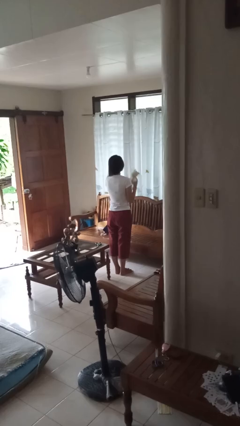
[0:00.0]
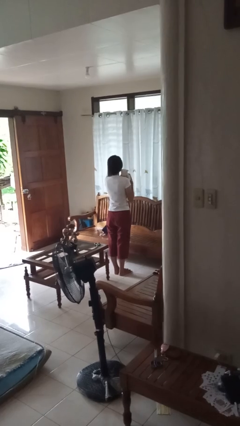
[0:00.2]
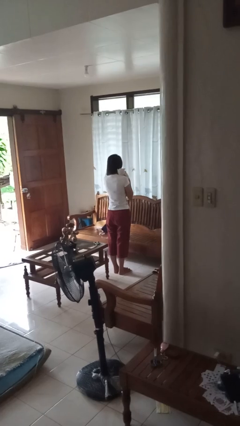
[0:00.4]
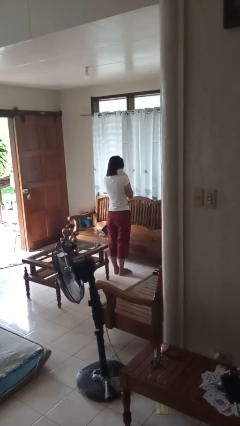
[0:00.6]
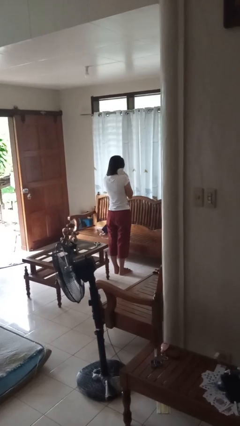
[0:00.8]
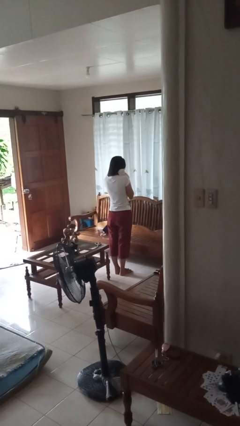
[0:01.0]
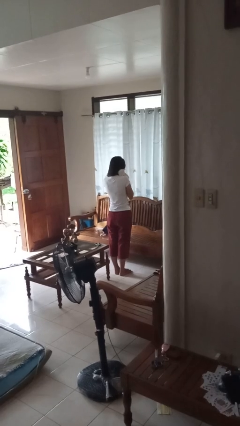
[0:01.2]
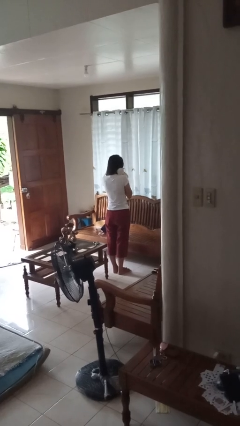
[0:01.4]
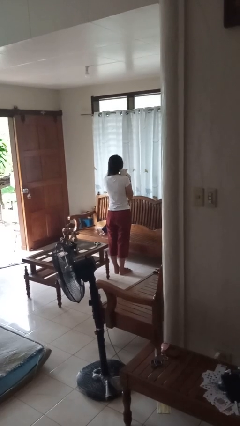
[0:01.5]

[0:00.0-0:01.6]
person hugs stuffed animal

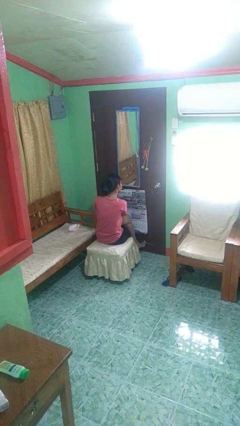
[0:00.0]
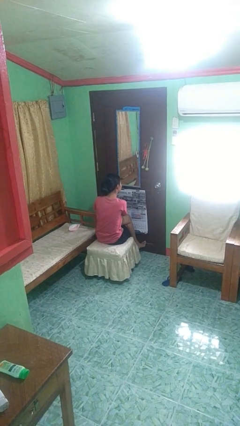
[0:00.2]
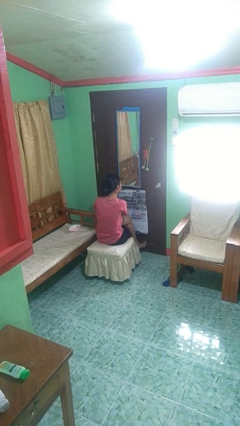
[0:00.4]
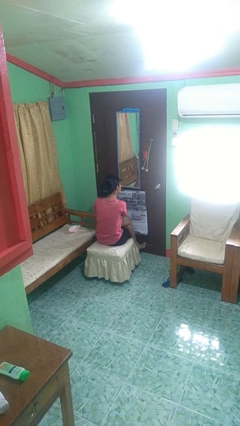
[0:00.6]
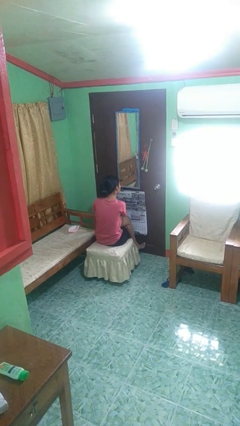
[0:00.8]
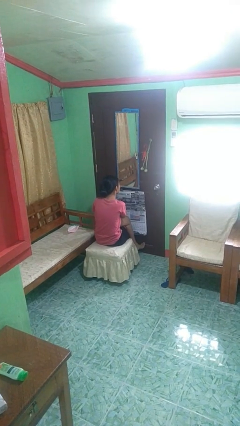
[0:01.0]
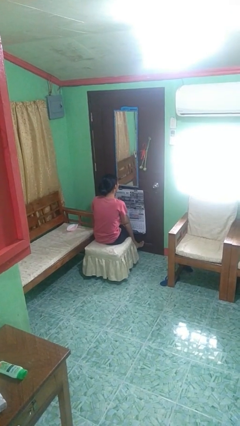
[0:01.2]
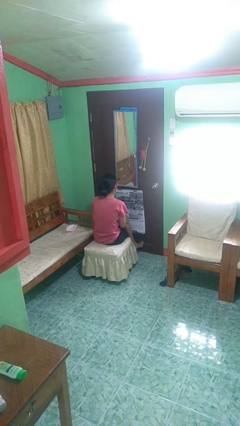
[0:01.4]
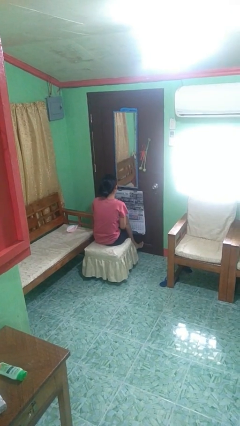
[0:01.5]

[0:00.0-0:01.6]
person takes off earrings

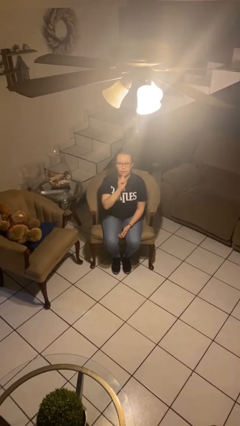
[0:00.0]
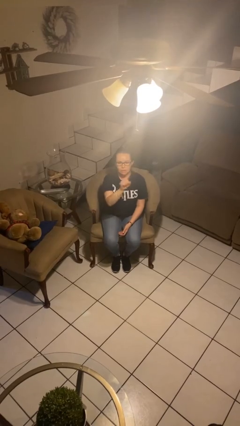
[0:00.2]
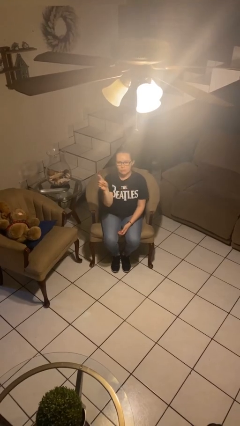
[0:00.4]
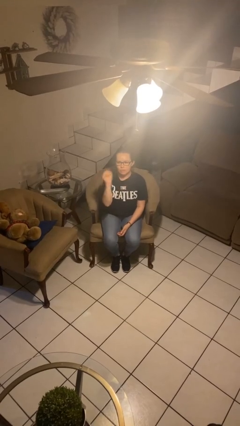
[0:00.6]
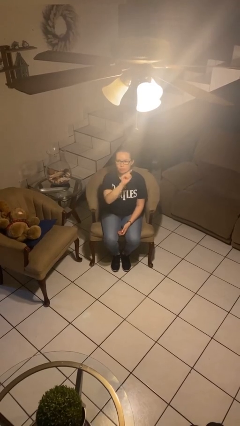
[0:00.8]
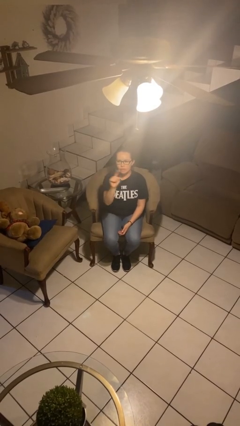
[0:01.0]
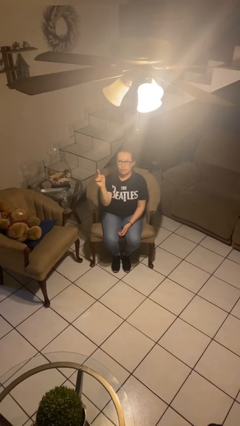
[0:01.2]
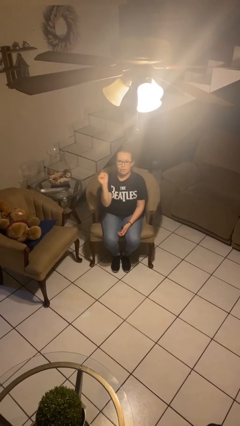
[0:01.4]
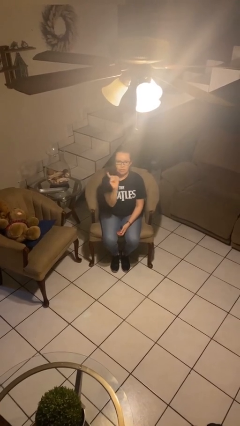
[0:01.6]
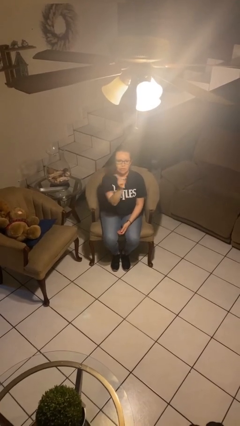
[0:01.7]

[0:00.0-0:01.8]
person gestures swipe left

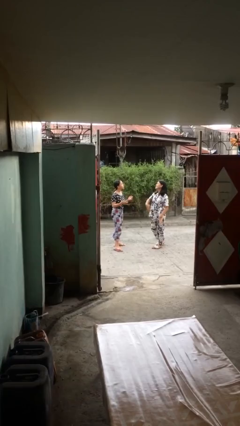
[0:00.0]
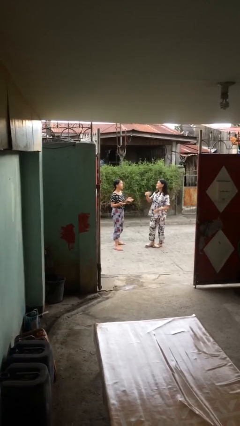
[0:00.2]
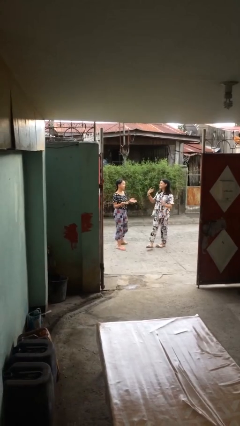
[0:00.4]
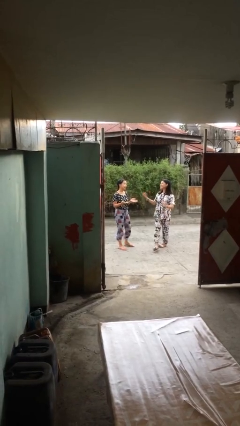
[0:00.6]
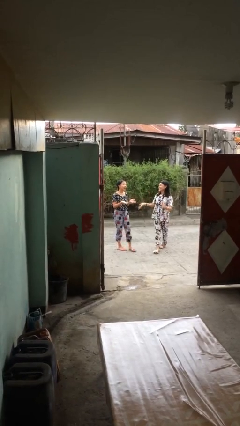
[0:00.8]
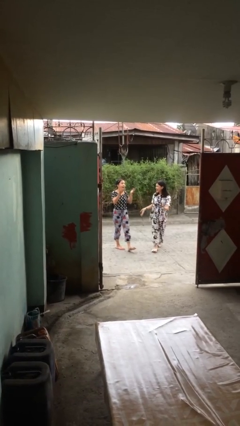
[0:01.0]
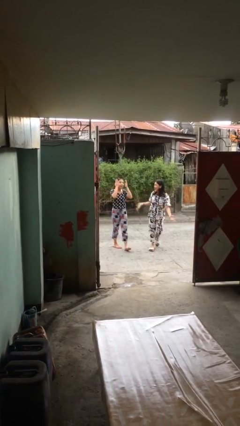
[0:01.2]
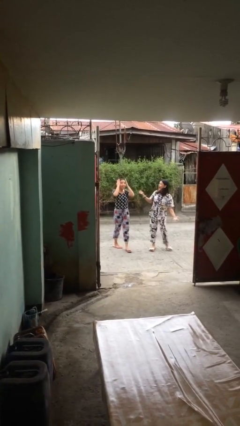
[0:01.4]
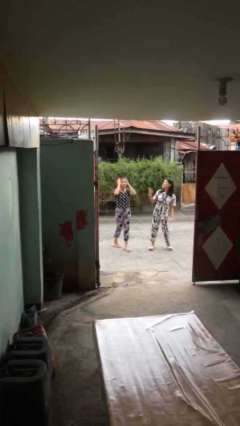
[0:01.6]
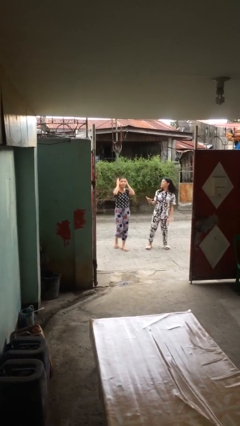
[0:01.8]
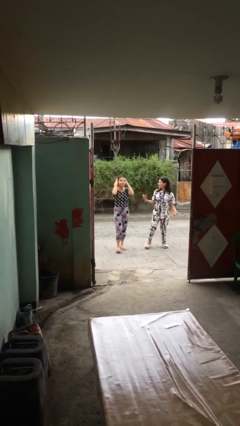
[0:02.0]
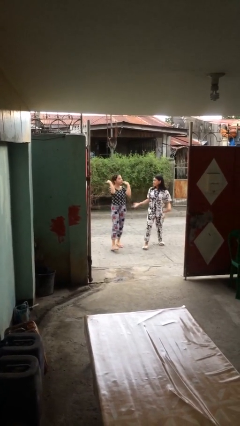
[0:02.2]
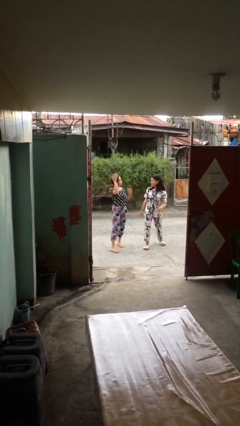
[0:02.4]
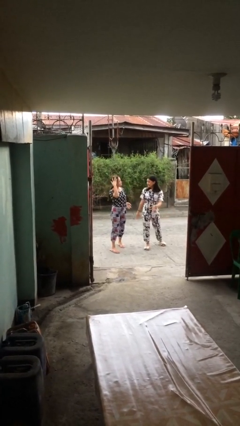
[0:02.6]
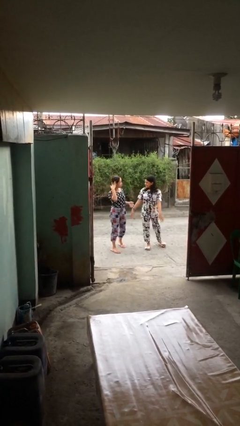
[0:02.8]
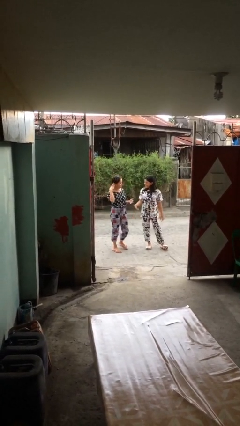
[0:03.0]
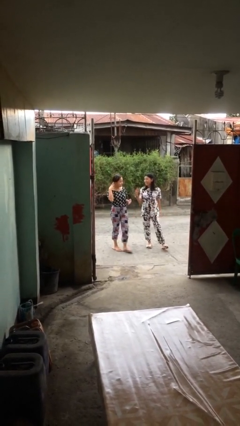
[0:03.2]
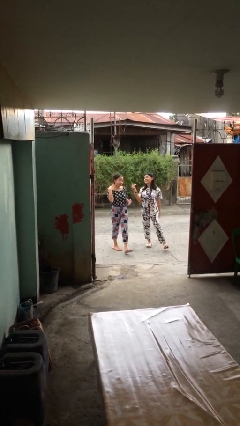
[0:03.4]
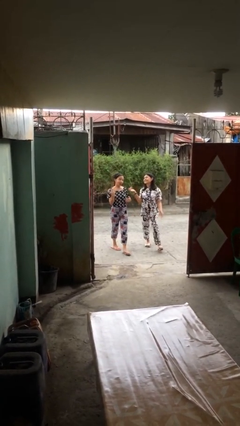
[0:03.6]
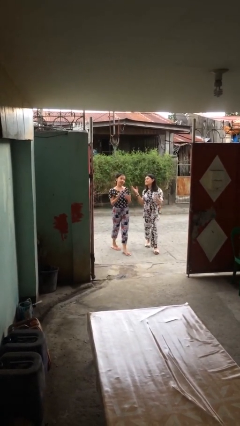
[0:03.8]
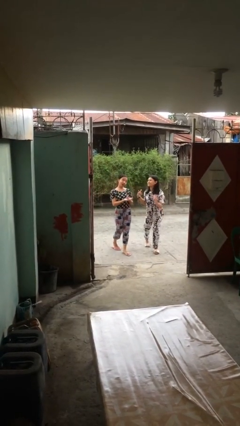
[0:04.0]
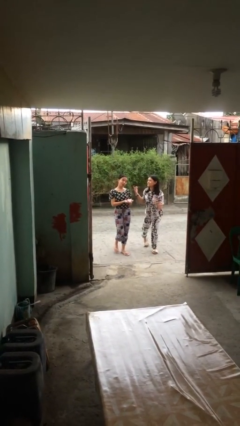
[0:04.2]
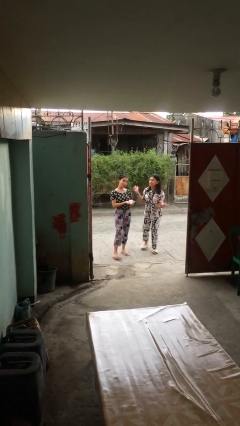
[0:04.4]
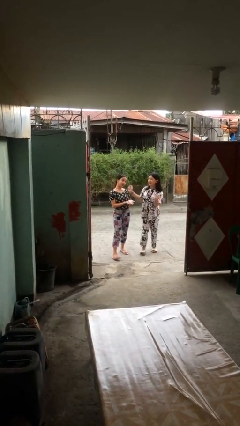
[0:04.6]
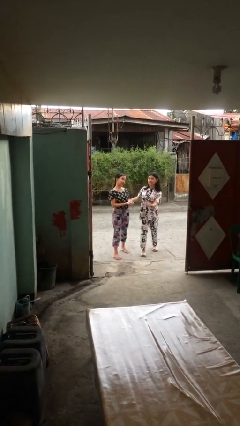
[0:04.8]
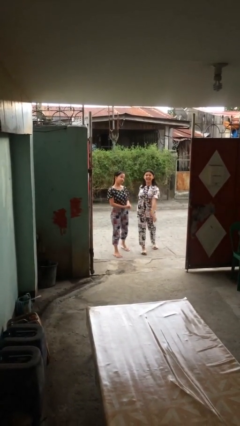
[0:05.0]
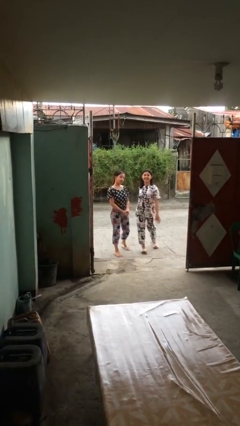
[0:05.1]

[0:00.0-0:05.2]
person talks to person

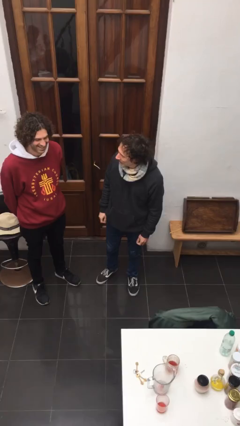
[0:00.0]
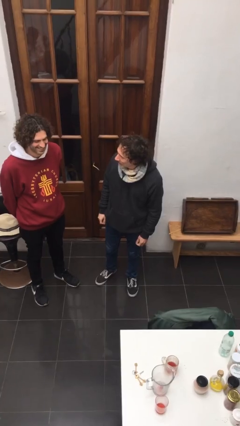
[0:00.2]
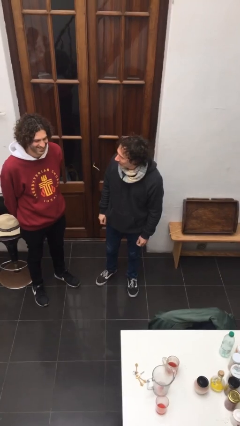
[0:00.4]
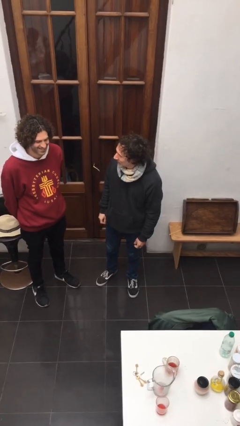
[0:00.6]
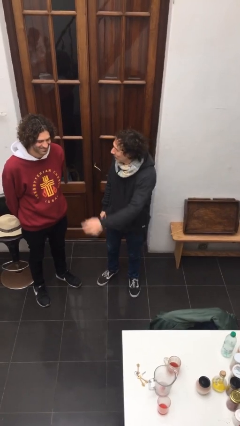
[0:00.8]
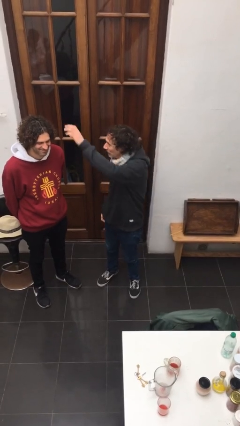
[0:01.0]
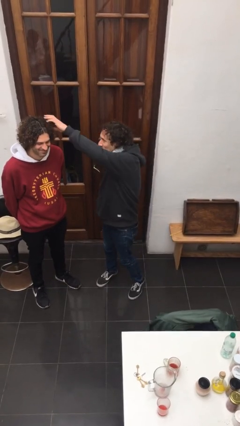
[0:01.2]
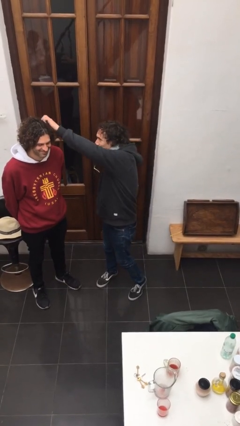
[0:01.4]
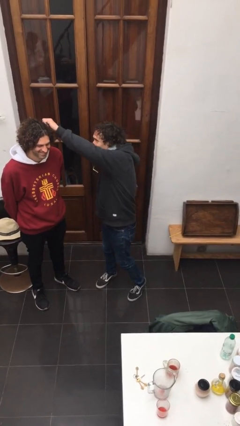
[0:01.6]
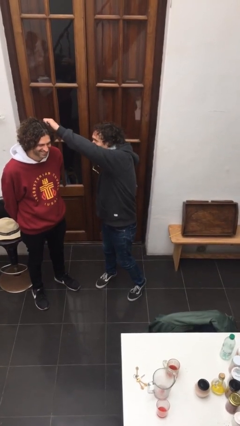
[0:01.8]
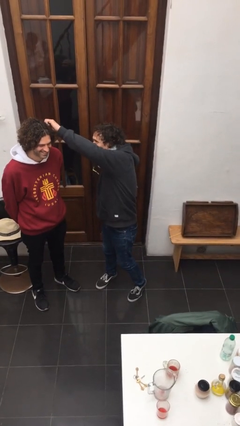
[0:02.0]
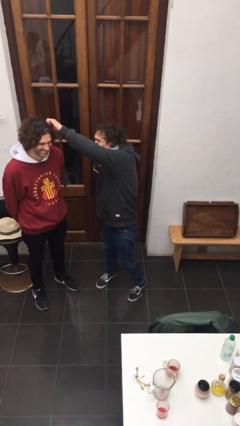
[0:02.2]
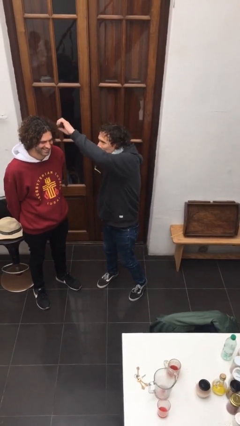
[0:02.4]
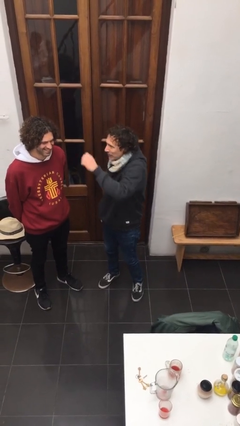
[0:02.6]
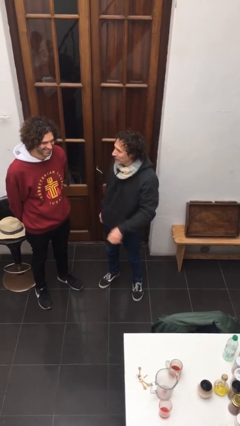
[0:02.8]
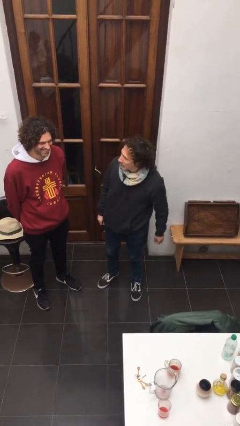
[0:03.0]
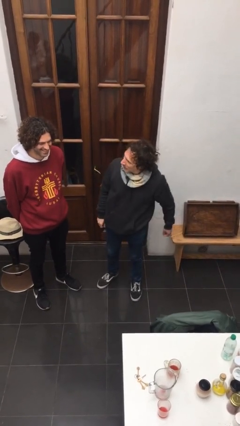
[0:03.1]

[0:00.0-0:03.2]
person grabs person by hair

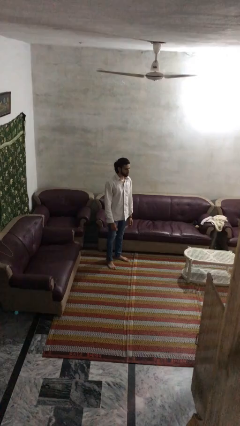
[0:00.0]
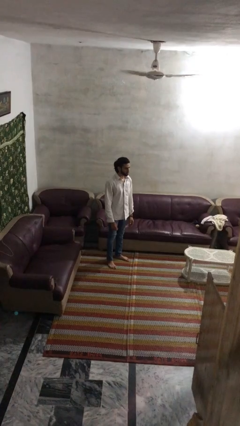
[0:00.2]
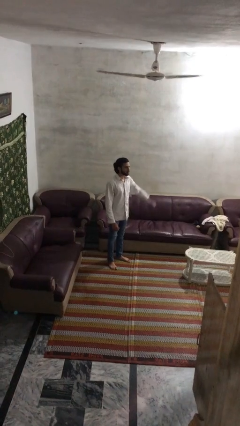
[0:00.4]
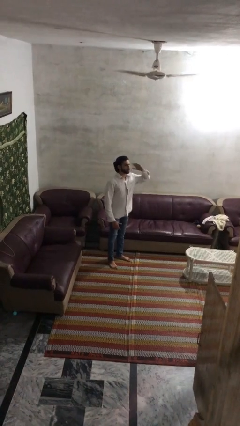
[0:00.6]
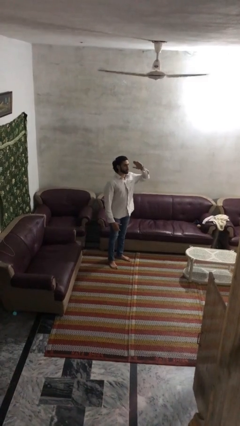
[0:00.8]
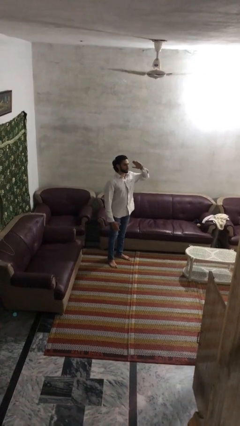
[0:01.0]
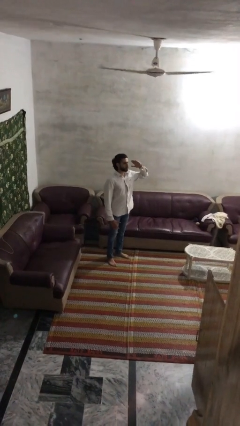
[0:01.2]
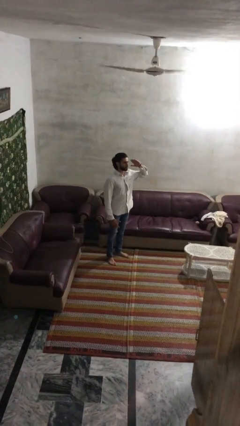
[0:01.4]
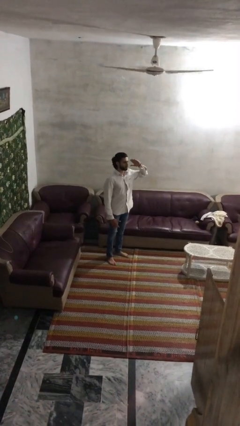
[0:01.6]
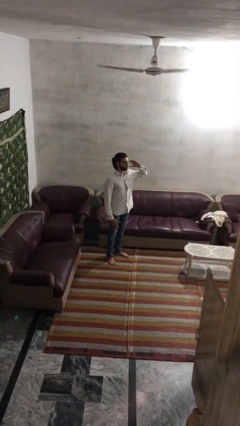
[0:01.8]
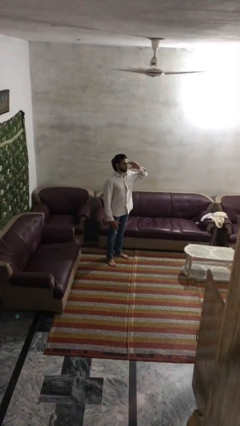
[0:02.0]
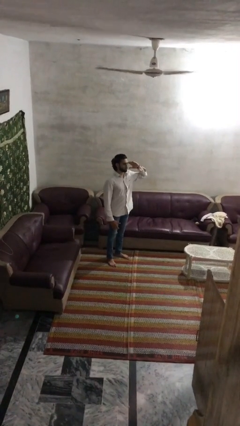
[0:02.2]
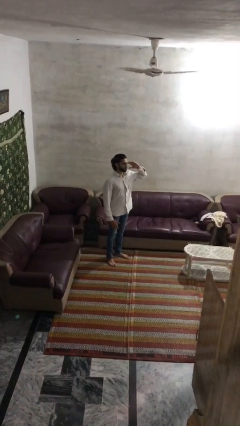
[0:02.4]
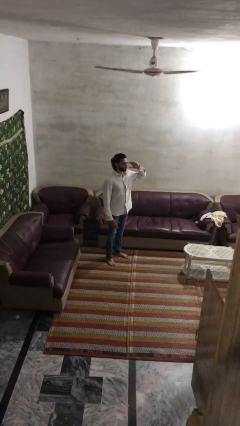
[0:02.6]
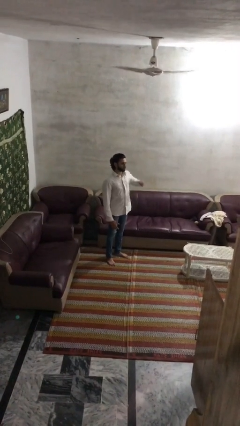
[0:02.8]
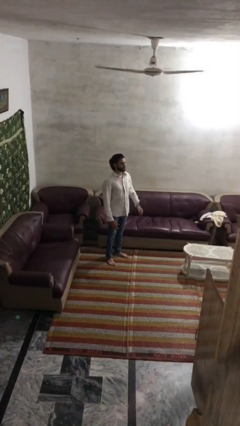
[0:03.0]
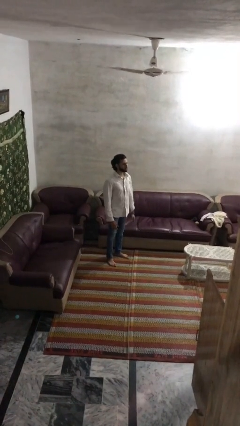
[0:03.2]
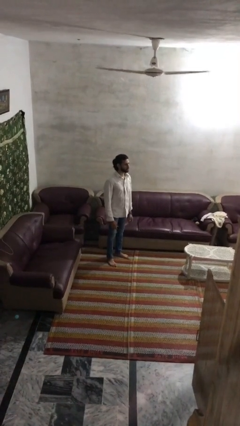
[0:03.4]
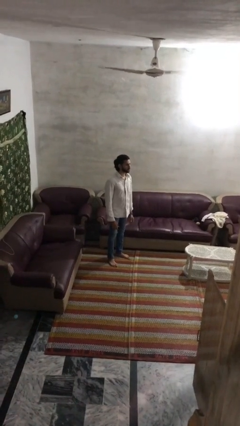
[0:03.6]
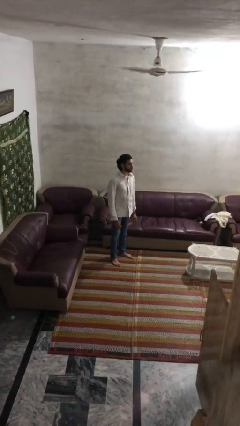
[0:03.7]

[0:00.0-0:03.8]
person salutes

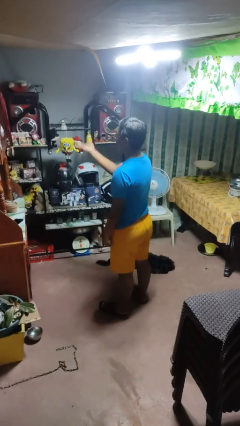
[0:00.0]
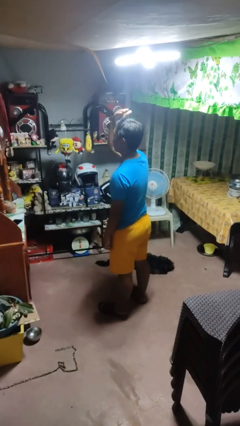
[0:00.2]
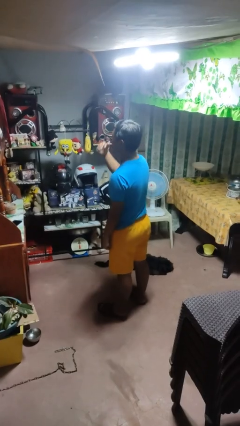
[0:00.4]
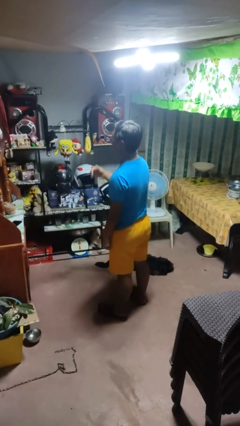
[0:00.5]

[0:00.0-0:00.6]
person gestures swipe up
